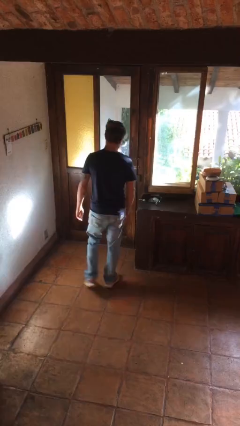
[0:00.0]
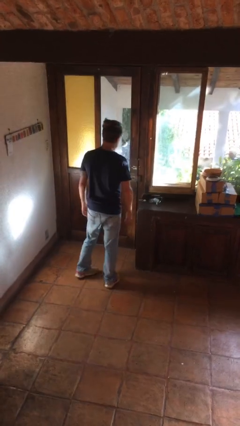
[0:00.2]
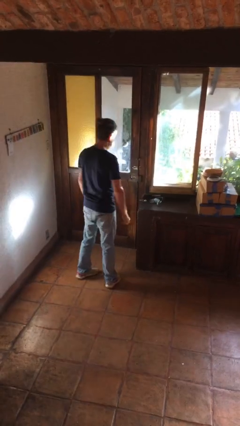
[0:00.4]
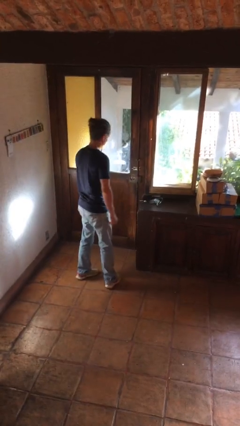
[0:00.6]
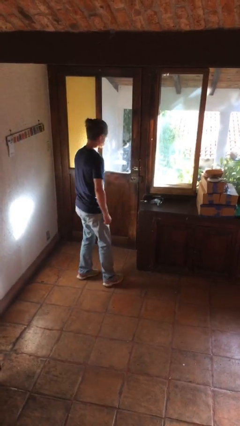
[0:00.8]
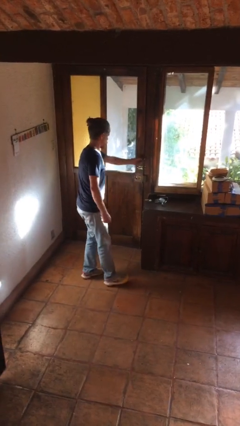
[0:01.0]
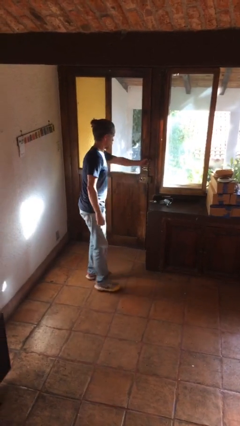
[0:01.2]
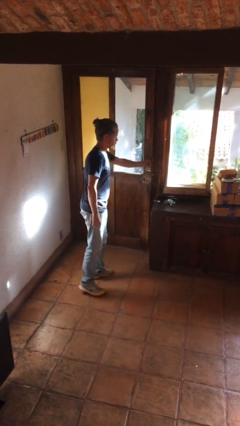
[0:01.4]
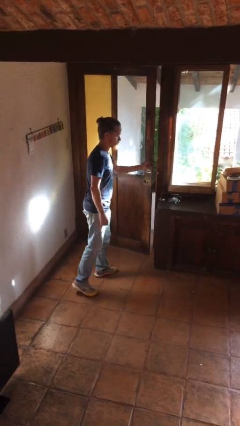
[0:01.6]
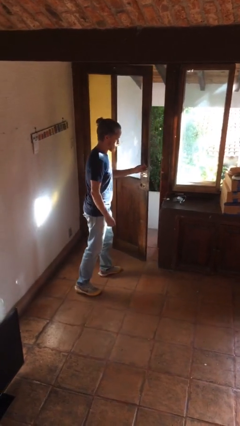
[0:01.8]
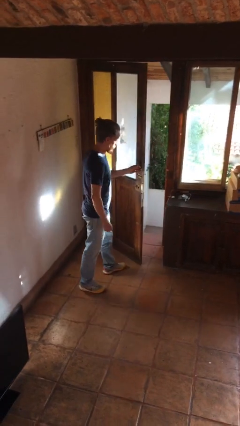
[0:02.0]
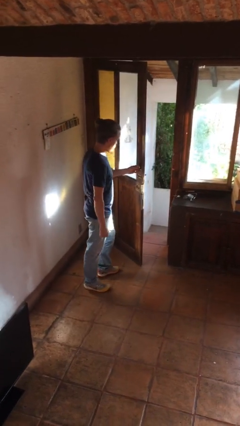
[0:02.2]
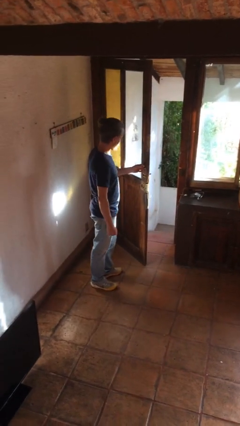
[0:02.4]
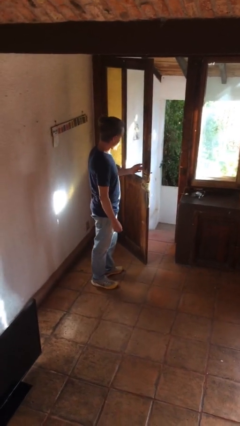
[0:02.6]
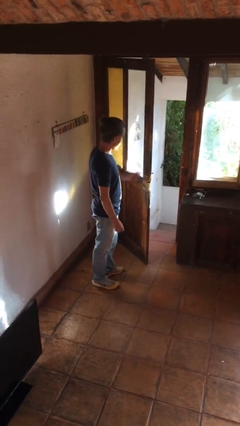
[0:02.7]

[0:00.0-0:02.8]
person opens facility door

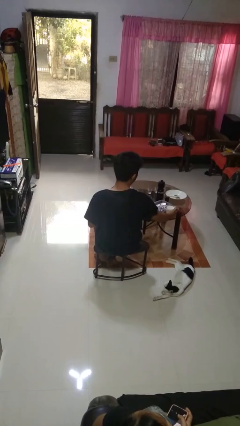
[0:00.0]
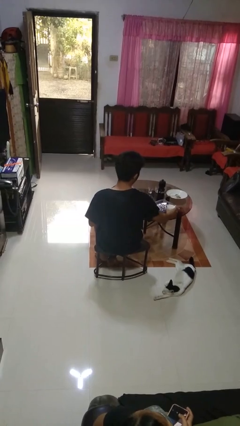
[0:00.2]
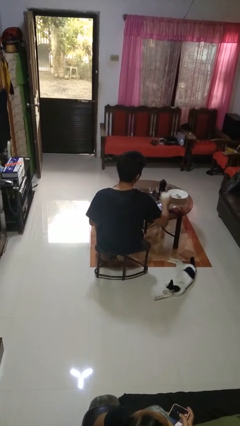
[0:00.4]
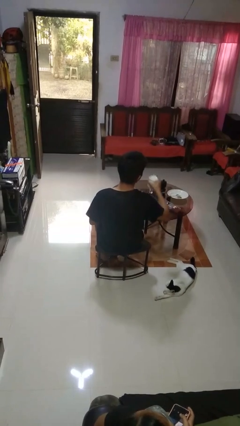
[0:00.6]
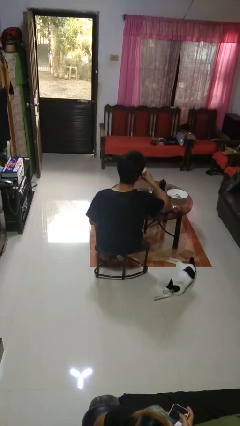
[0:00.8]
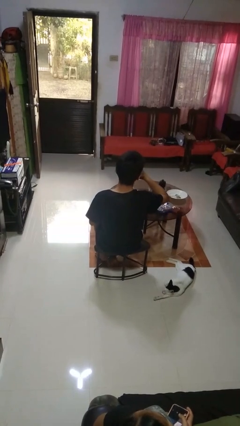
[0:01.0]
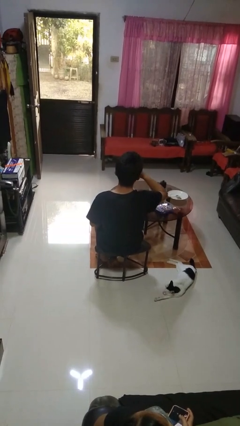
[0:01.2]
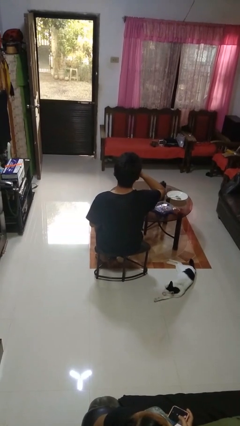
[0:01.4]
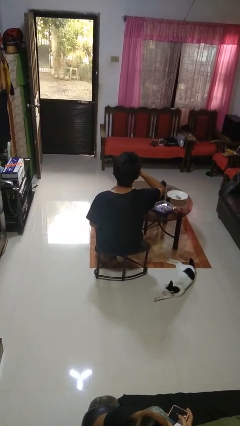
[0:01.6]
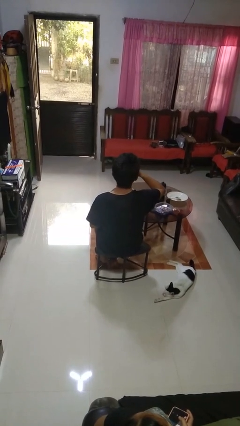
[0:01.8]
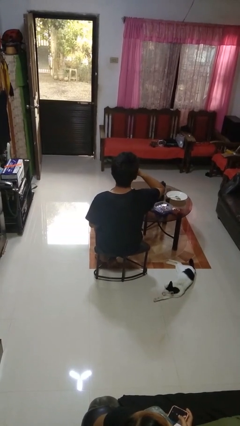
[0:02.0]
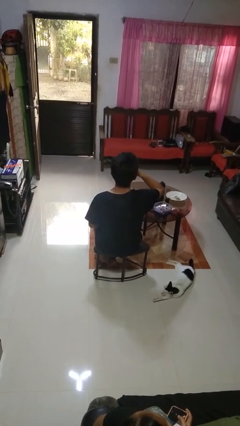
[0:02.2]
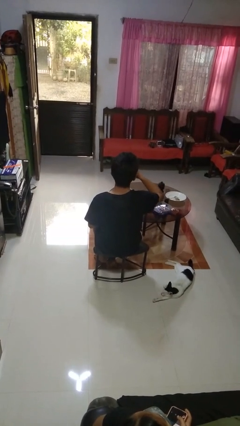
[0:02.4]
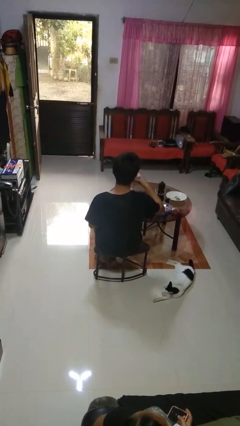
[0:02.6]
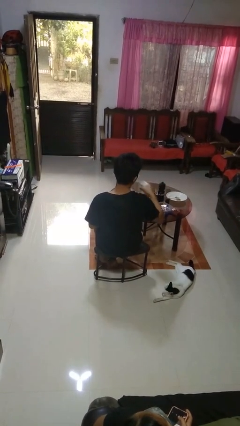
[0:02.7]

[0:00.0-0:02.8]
person drinks from cup

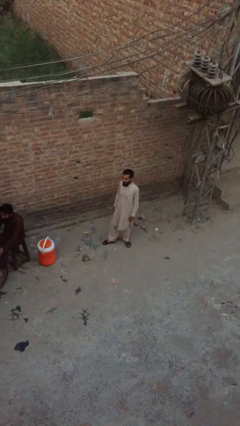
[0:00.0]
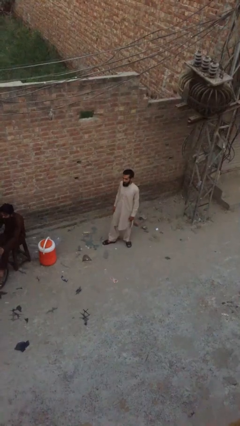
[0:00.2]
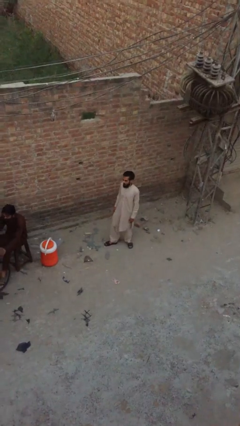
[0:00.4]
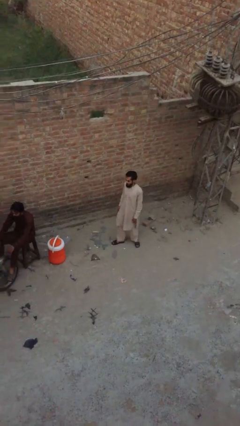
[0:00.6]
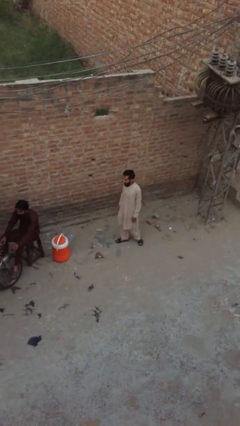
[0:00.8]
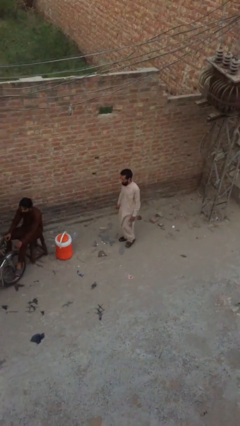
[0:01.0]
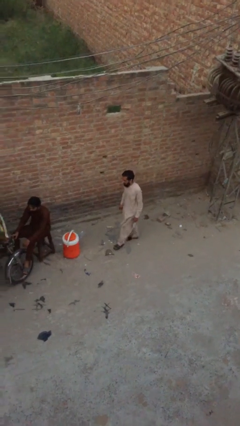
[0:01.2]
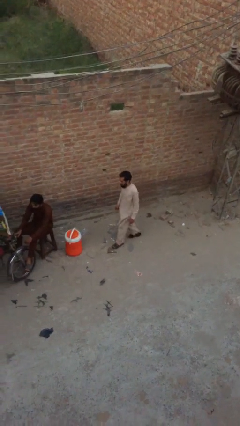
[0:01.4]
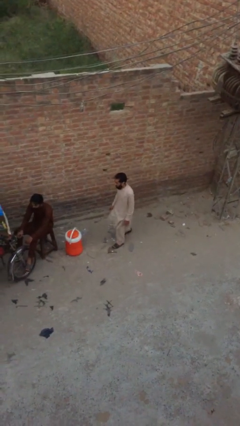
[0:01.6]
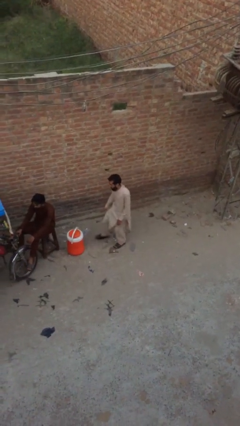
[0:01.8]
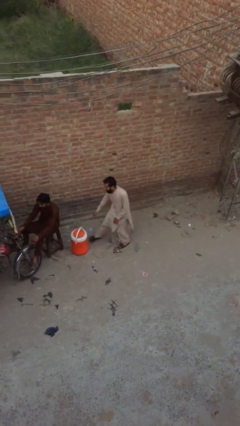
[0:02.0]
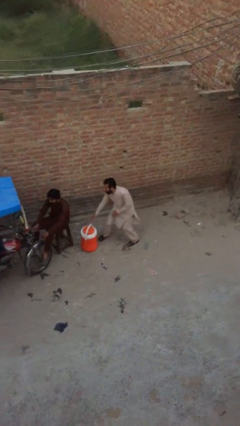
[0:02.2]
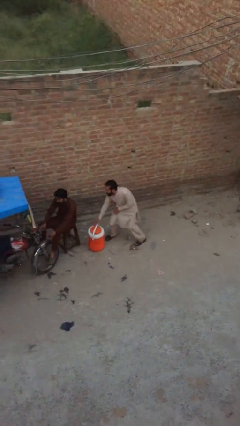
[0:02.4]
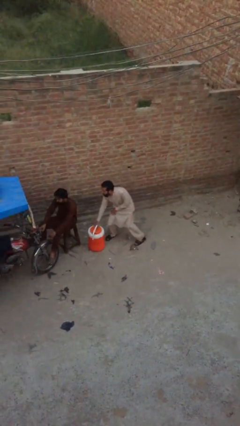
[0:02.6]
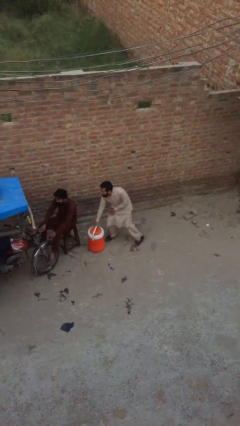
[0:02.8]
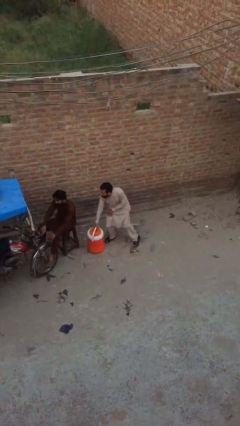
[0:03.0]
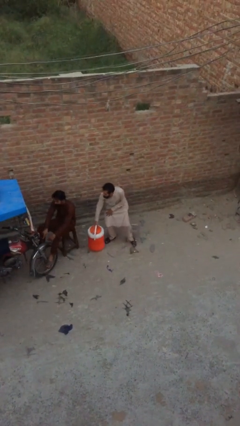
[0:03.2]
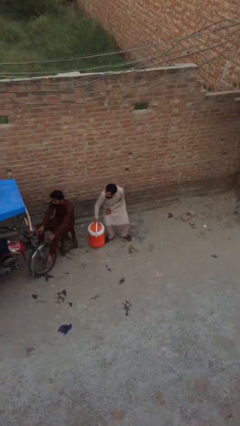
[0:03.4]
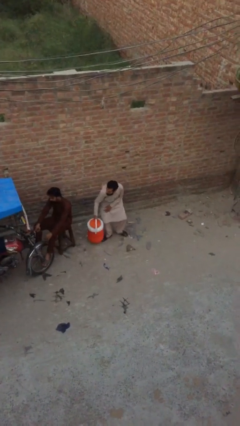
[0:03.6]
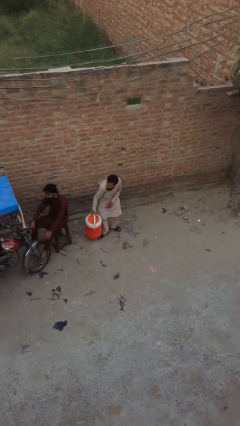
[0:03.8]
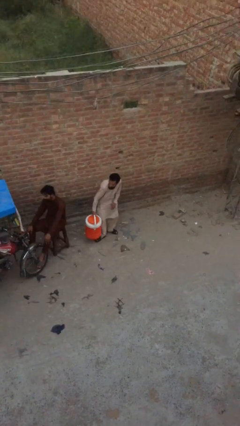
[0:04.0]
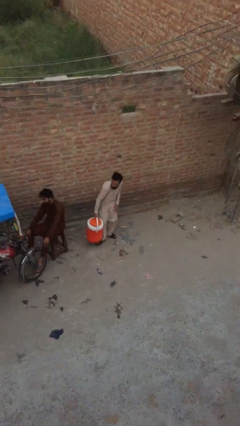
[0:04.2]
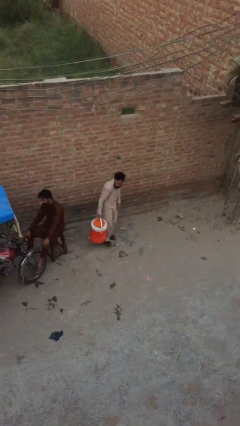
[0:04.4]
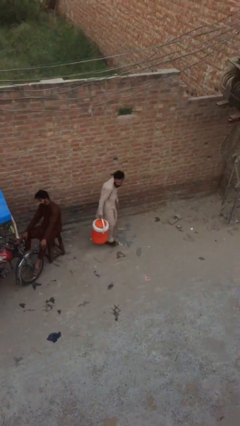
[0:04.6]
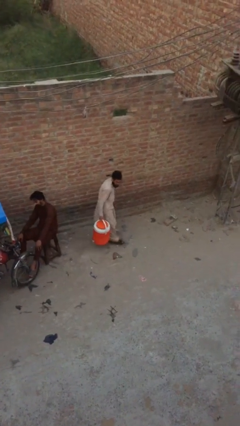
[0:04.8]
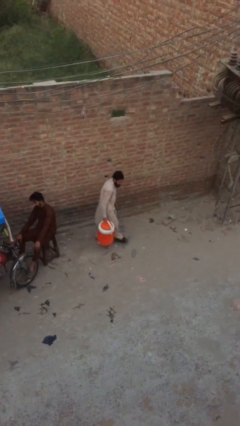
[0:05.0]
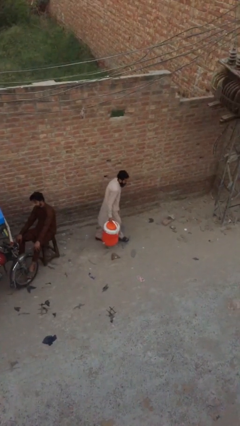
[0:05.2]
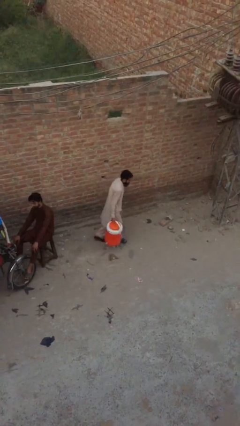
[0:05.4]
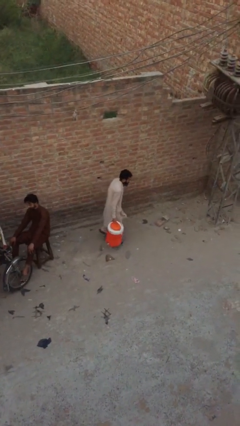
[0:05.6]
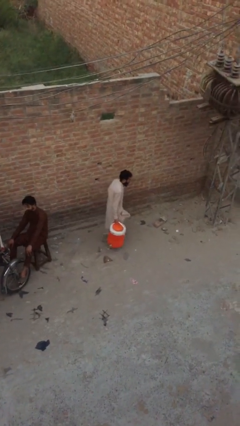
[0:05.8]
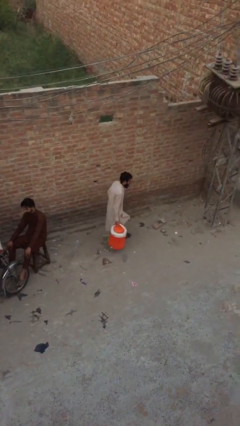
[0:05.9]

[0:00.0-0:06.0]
person steals object from person

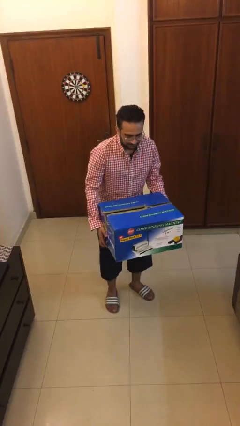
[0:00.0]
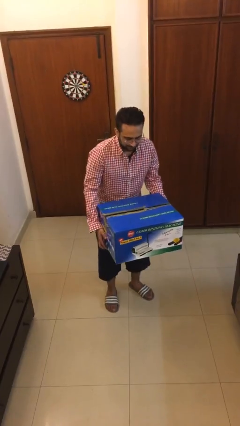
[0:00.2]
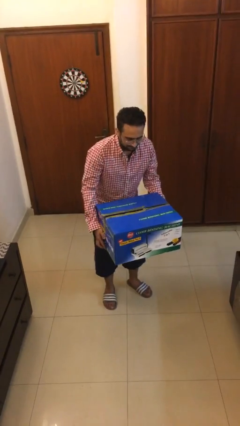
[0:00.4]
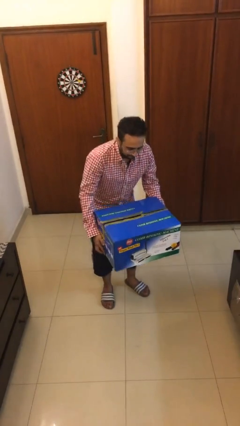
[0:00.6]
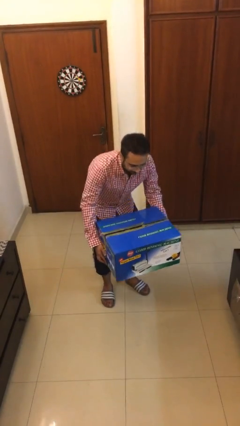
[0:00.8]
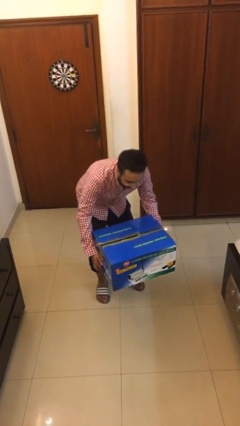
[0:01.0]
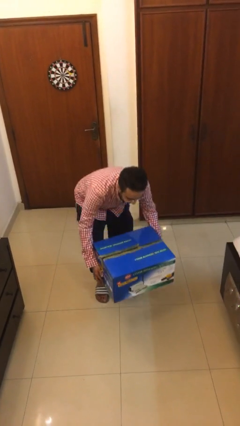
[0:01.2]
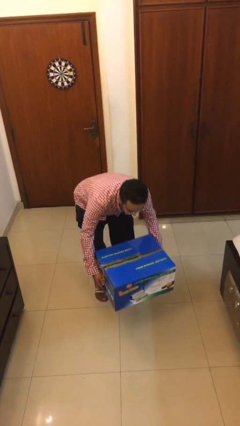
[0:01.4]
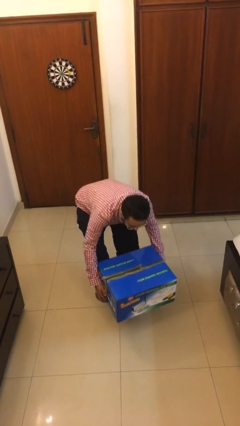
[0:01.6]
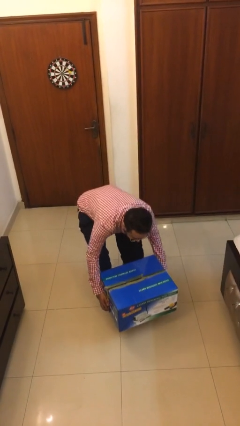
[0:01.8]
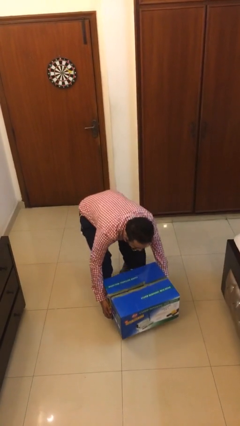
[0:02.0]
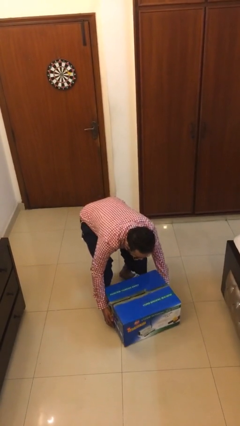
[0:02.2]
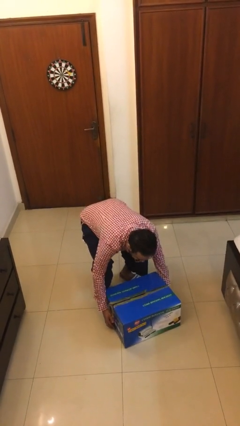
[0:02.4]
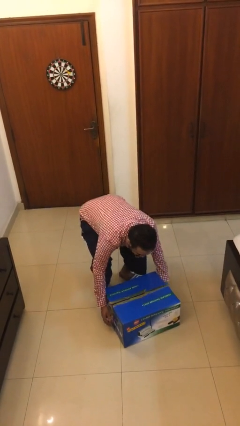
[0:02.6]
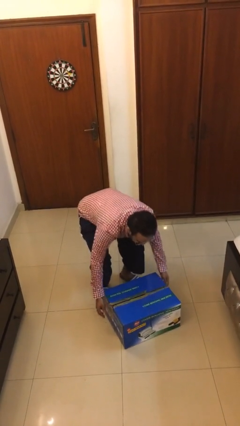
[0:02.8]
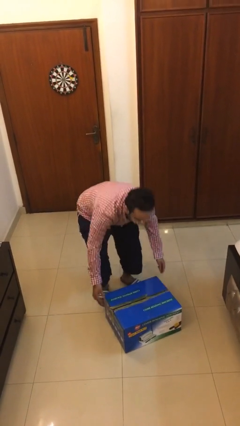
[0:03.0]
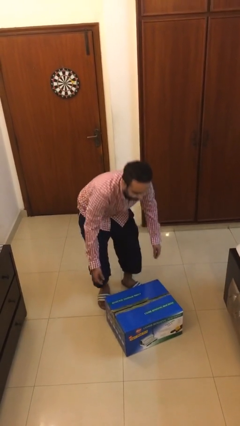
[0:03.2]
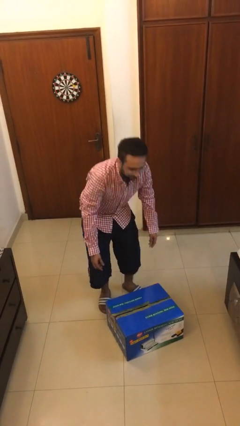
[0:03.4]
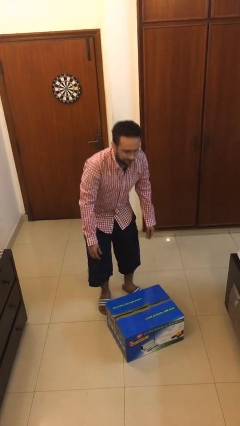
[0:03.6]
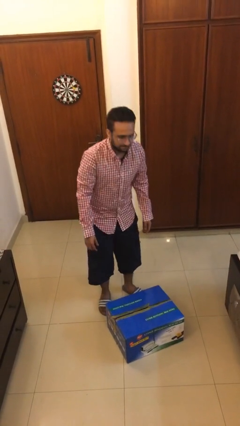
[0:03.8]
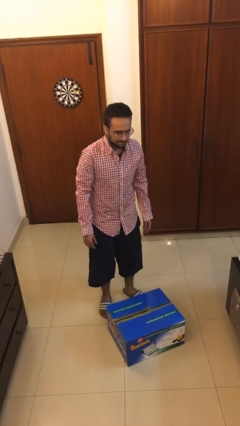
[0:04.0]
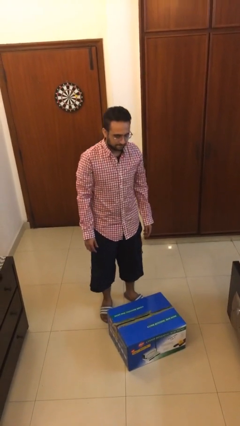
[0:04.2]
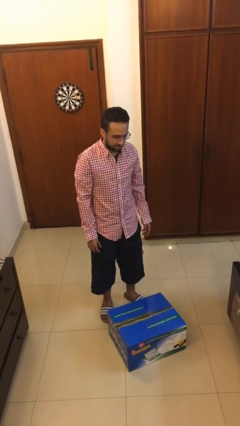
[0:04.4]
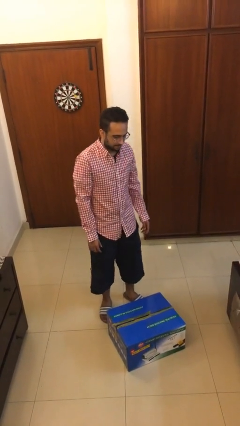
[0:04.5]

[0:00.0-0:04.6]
person puts down object on floor

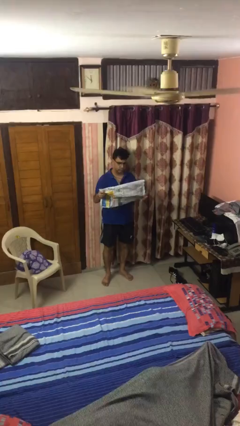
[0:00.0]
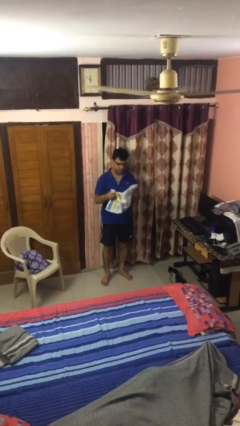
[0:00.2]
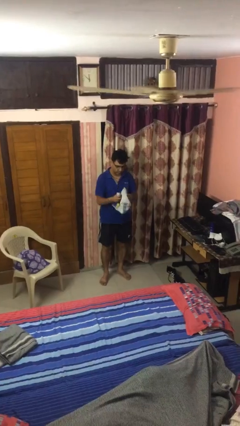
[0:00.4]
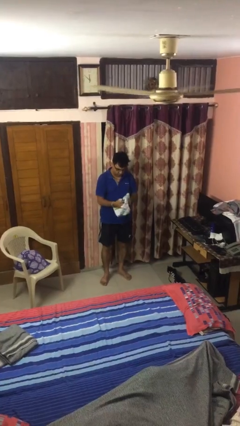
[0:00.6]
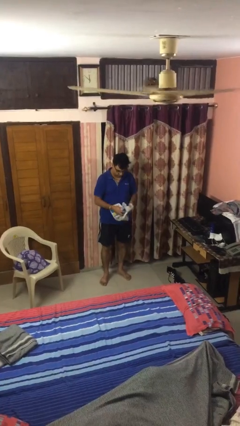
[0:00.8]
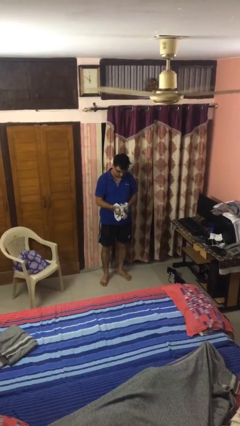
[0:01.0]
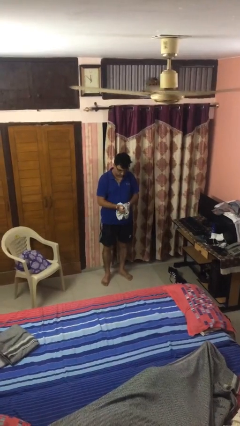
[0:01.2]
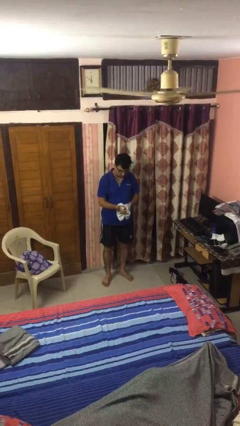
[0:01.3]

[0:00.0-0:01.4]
person crumples paper
